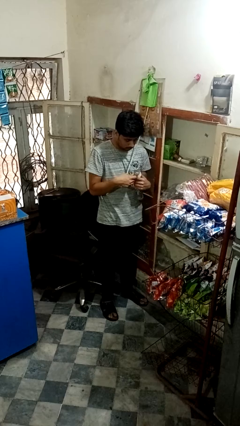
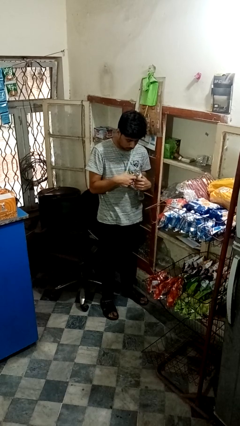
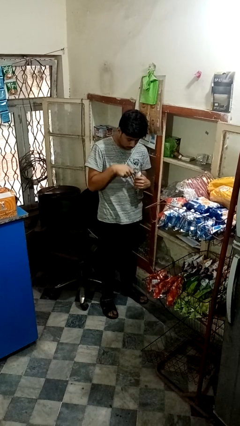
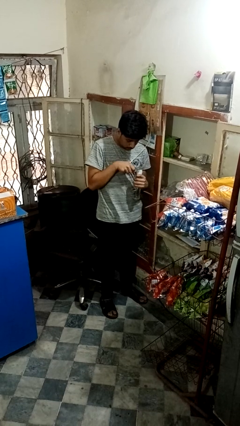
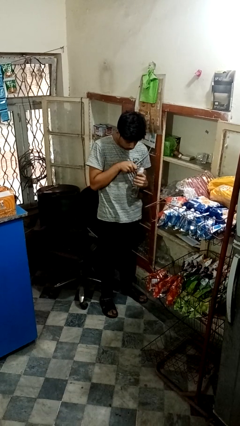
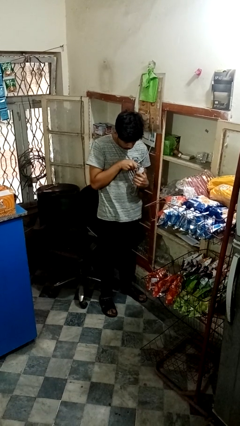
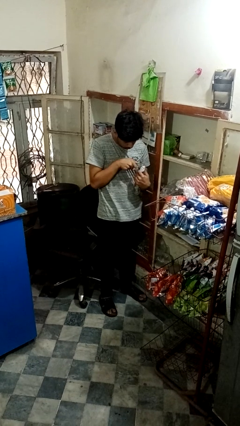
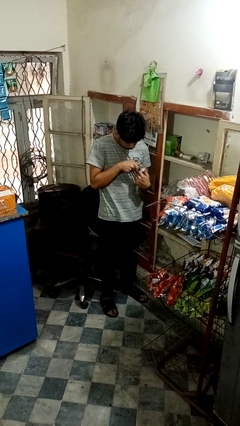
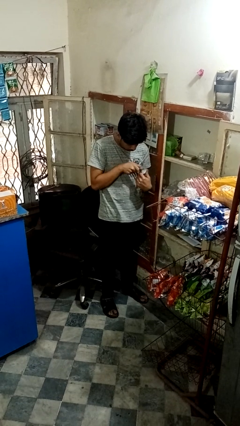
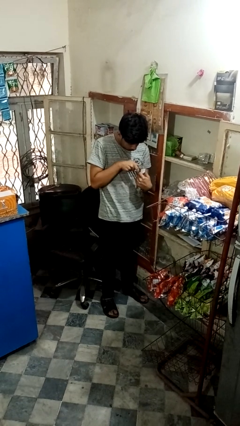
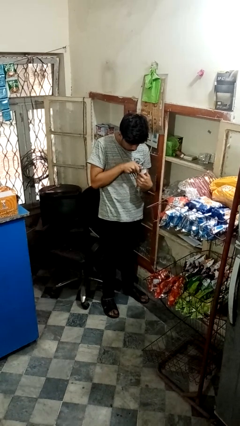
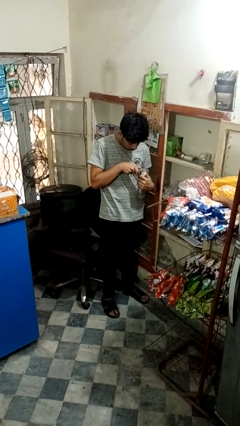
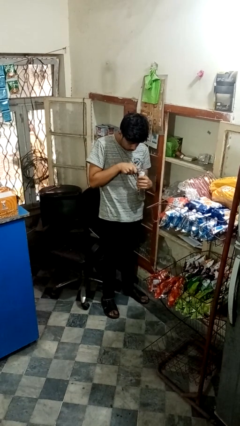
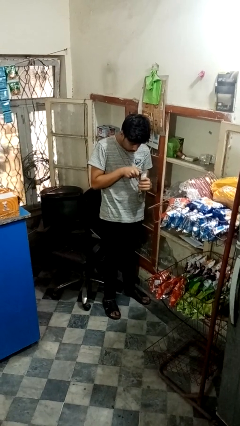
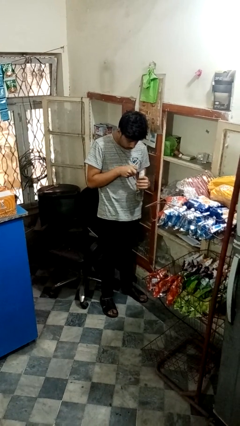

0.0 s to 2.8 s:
person opens can with can opener

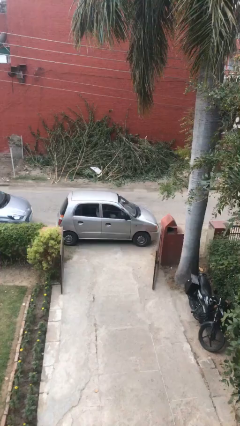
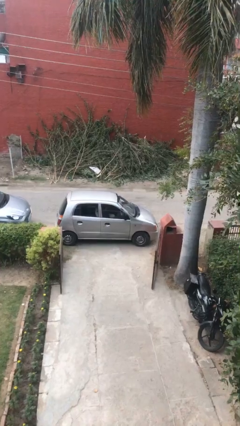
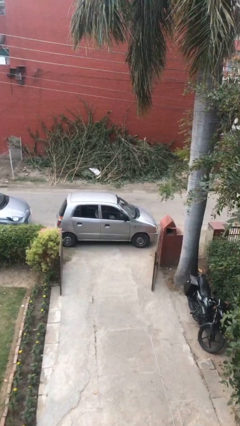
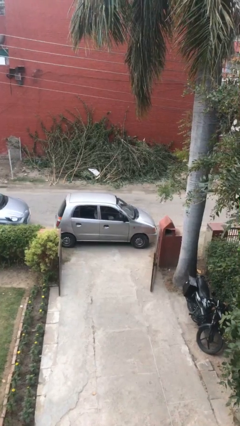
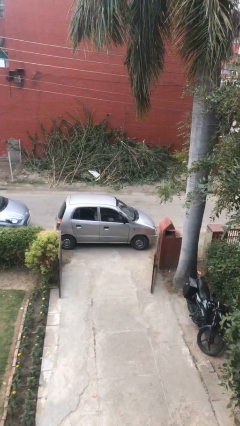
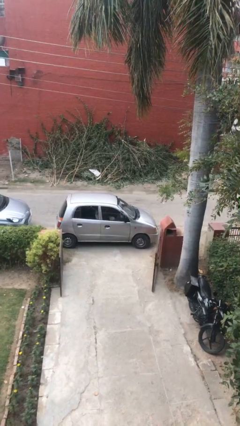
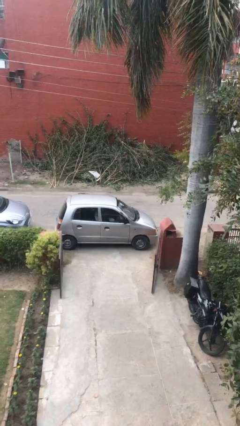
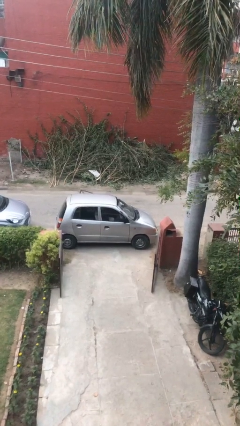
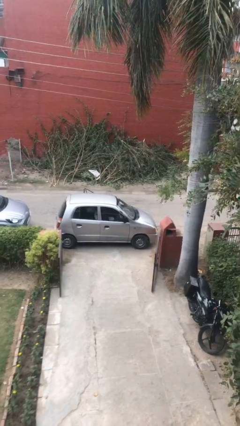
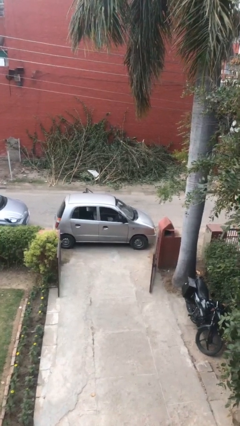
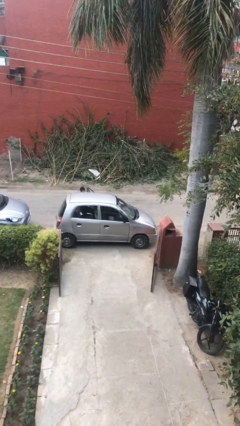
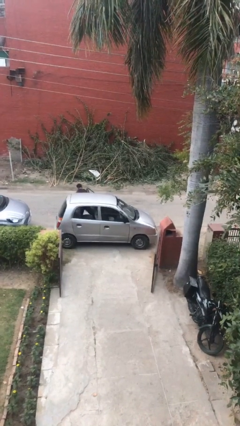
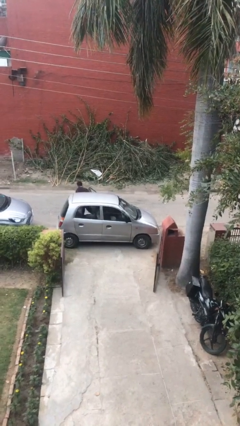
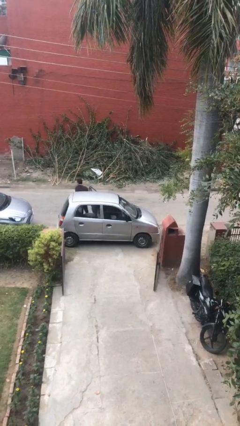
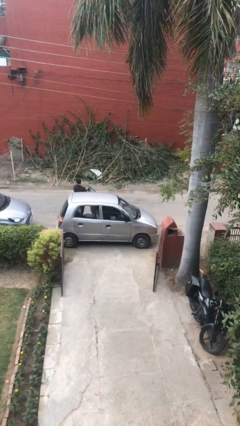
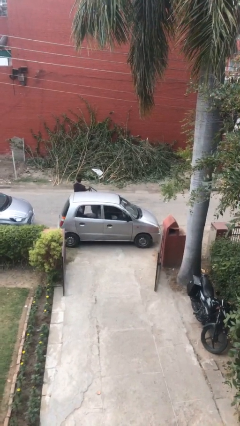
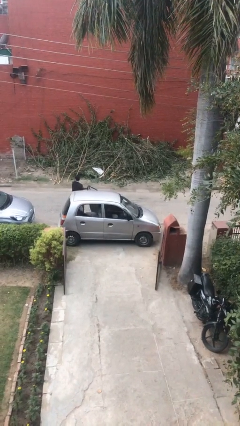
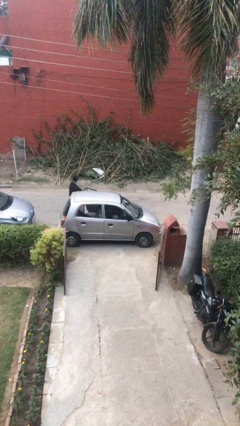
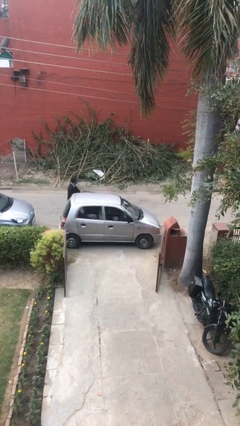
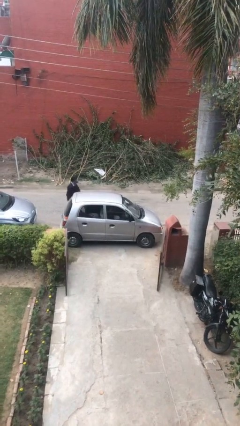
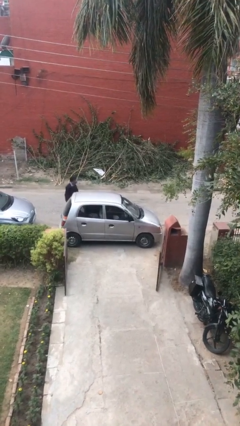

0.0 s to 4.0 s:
car drops off person

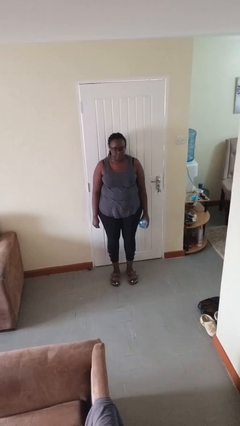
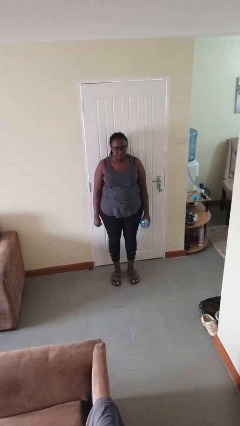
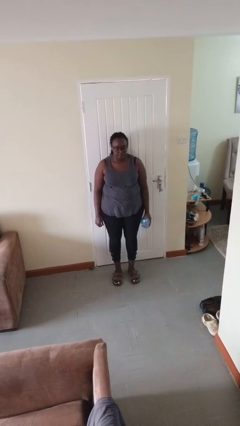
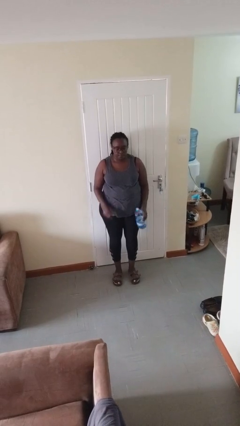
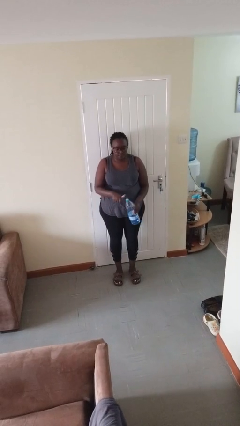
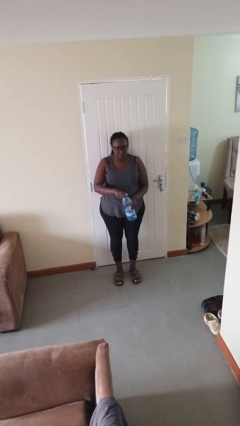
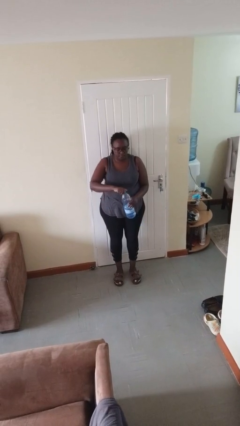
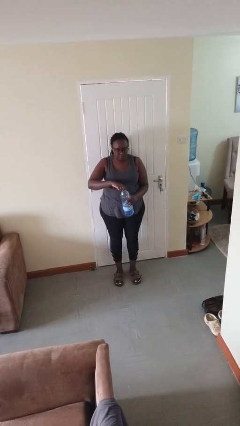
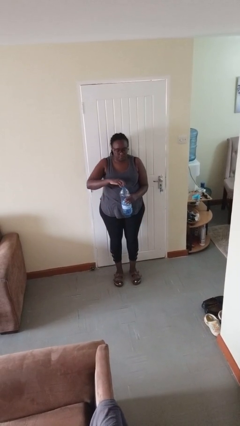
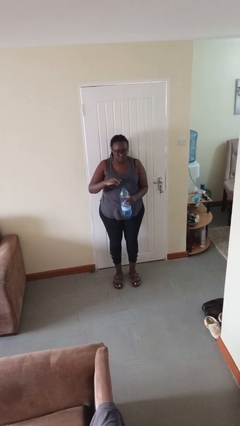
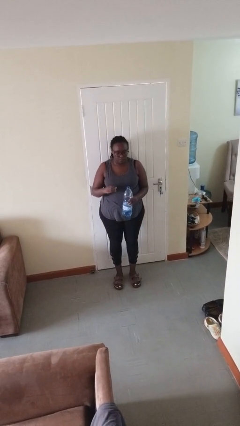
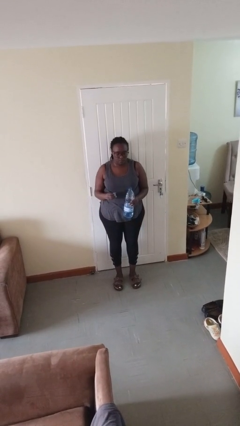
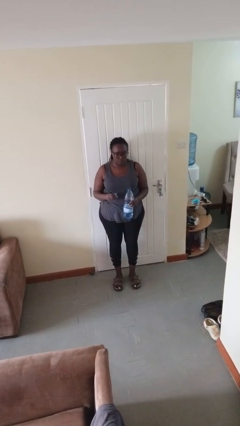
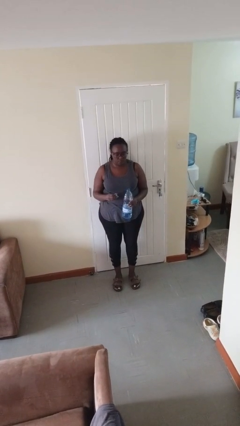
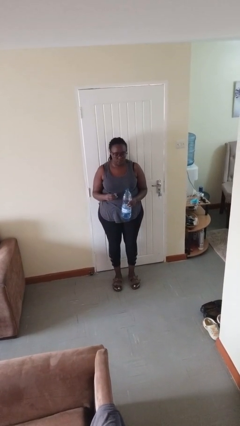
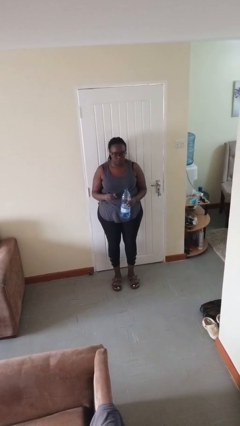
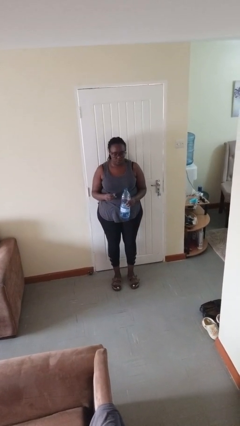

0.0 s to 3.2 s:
person unscrews lid from bottle

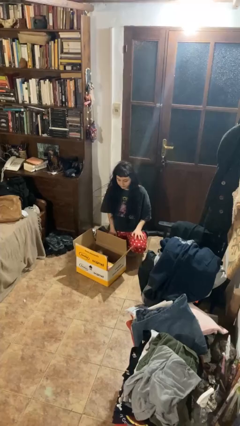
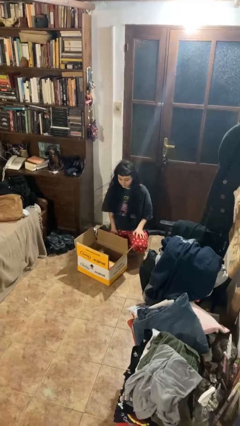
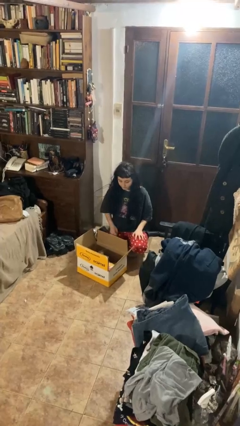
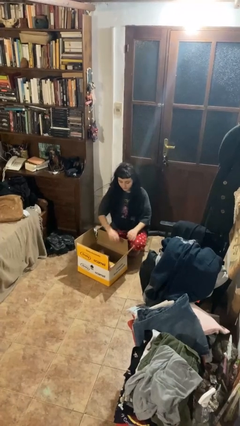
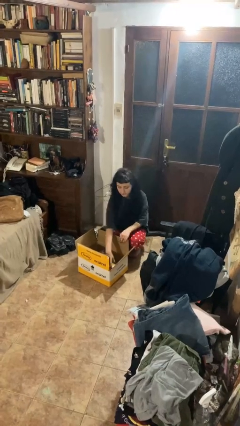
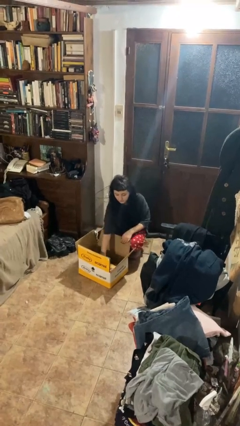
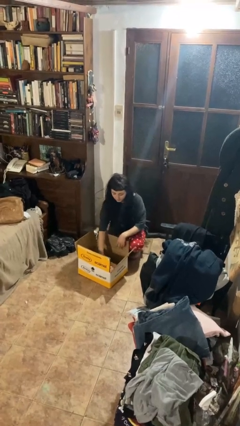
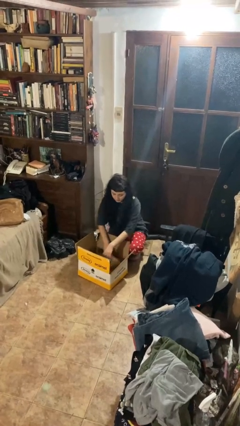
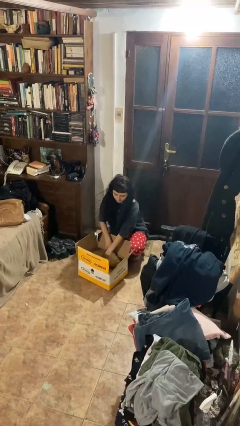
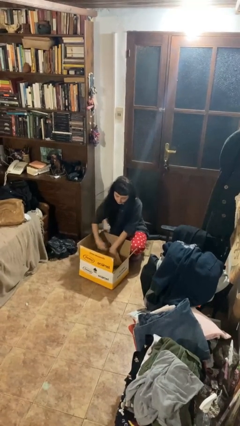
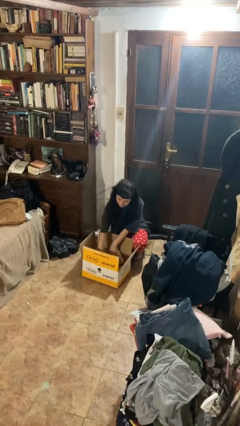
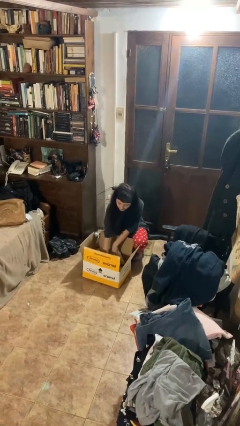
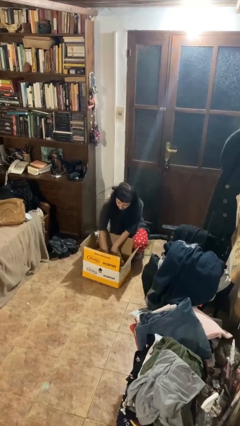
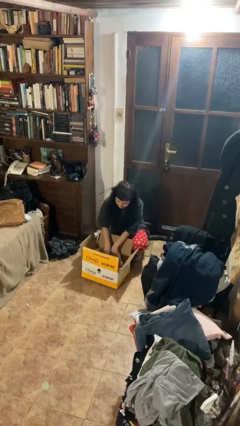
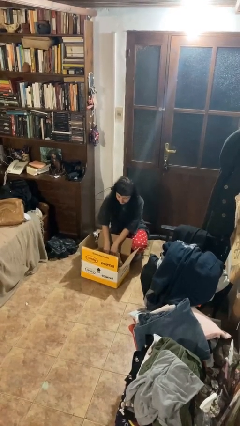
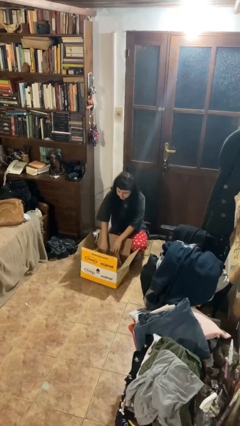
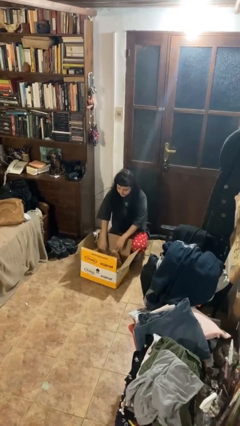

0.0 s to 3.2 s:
person searches in box

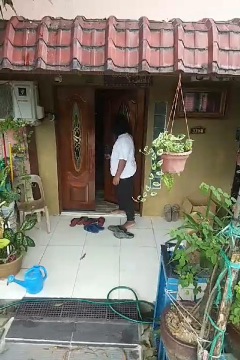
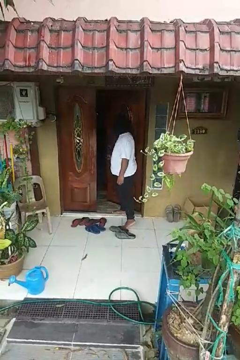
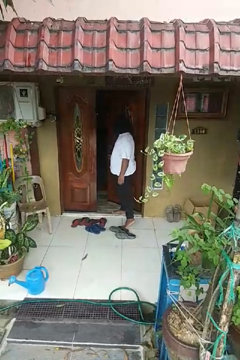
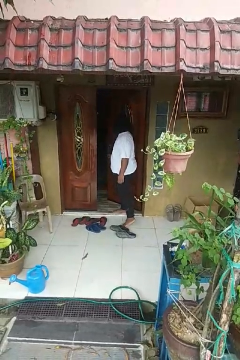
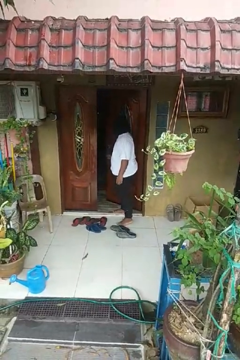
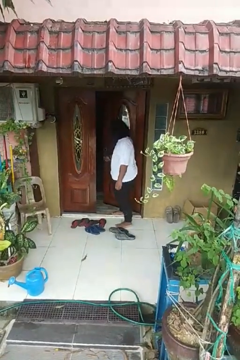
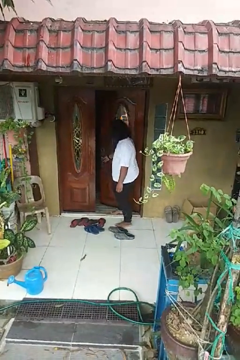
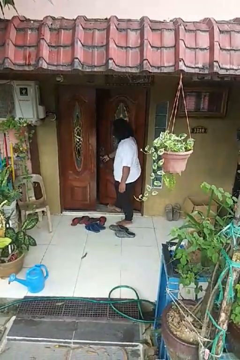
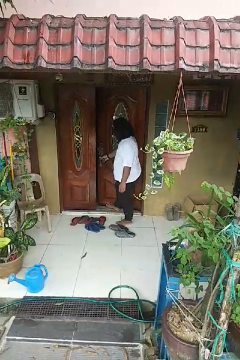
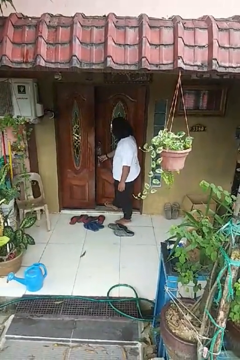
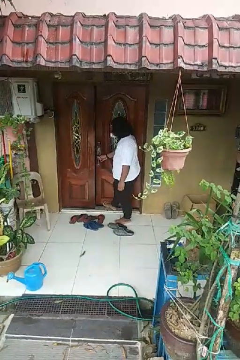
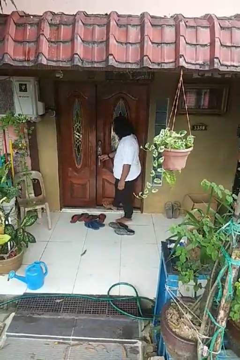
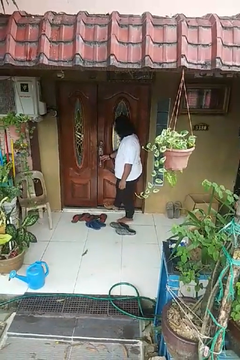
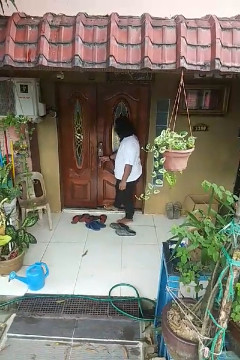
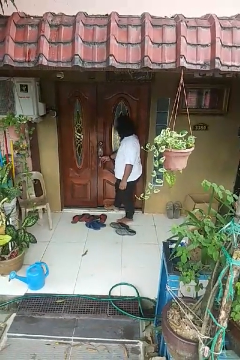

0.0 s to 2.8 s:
person closes door with foot

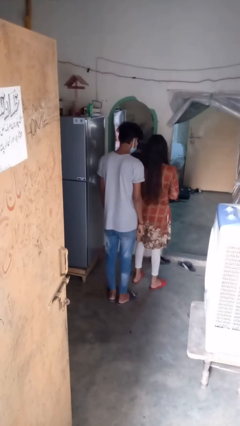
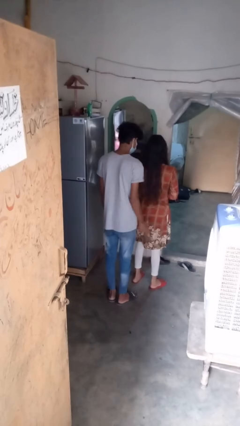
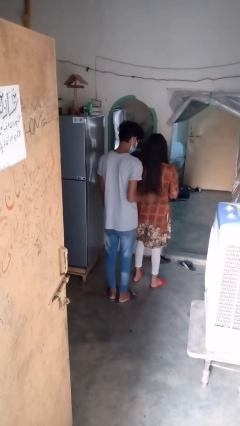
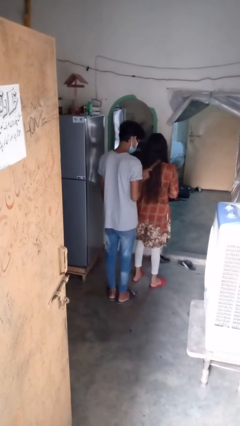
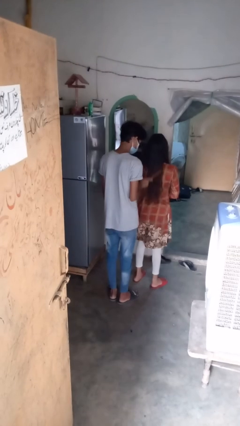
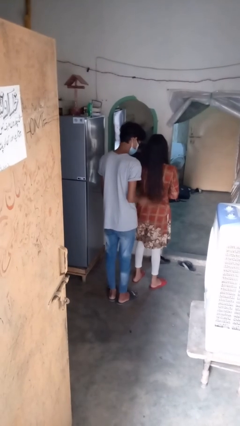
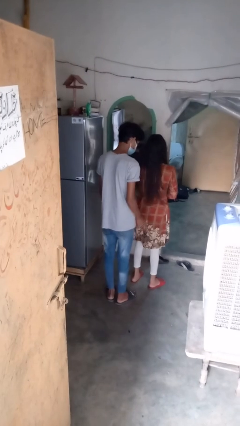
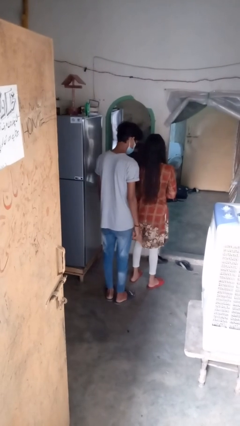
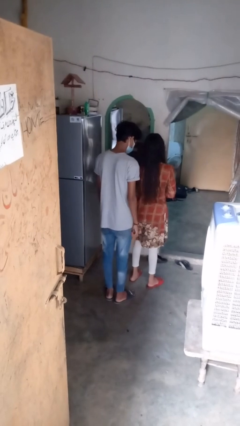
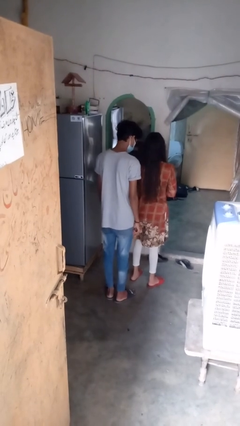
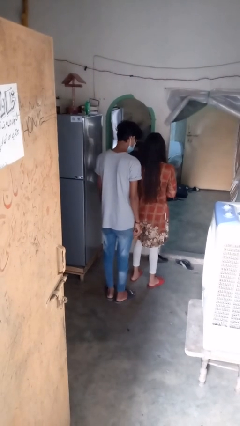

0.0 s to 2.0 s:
person brushes hair of person
